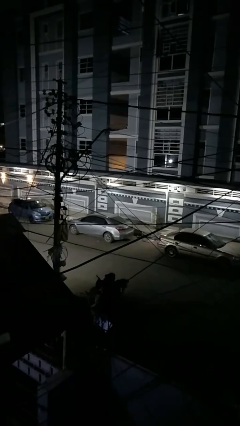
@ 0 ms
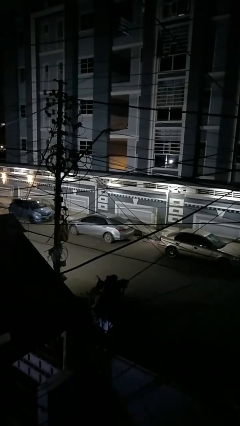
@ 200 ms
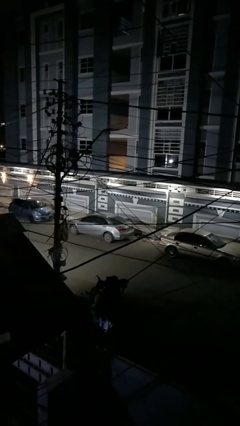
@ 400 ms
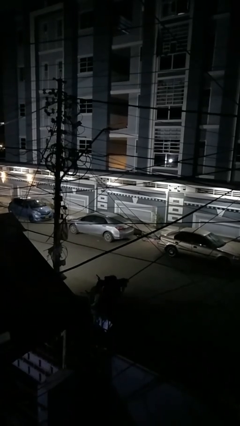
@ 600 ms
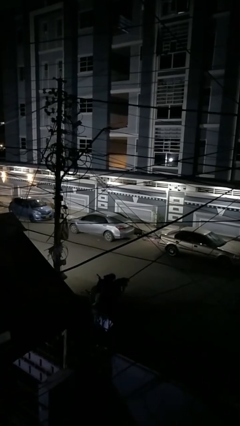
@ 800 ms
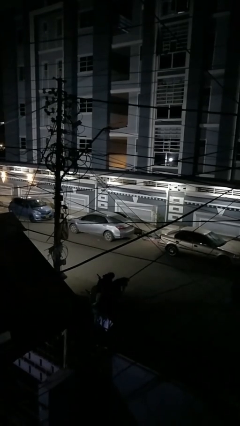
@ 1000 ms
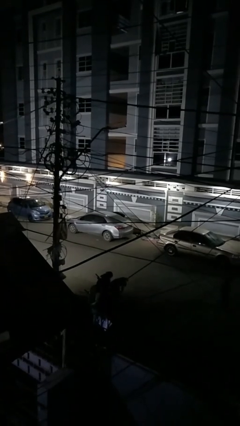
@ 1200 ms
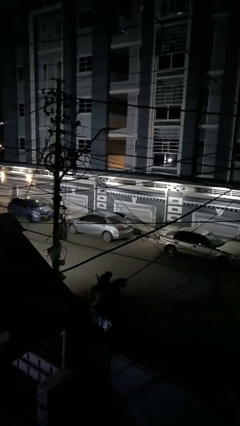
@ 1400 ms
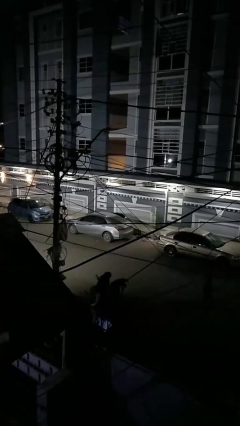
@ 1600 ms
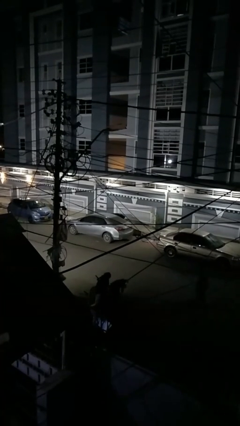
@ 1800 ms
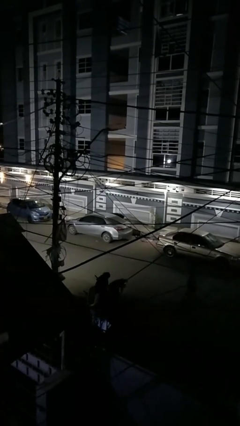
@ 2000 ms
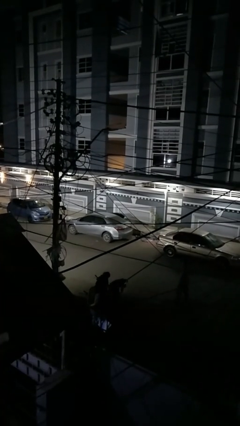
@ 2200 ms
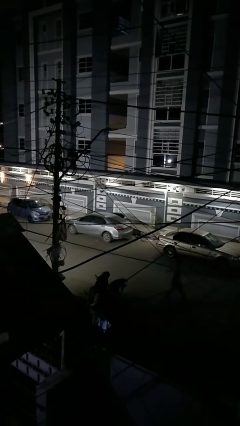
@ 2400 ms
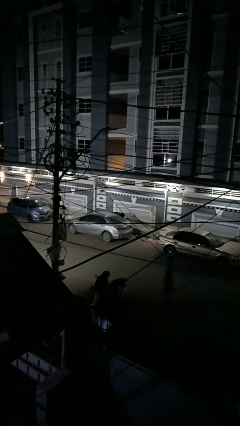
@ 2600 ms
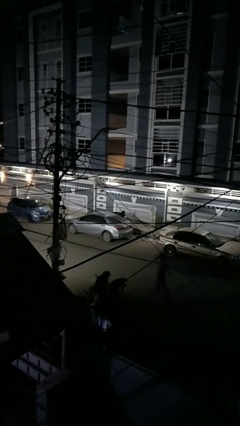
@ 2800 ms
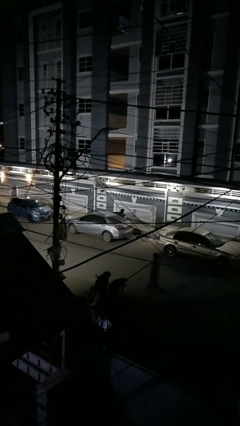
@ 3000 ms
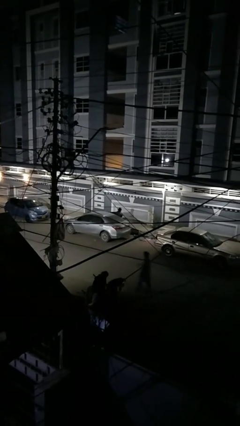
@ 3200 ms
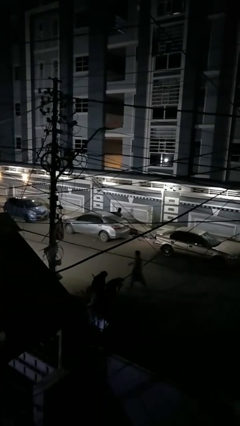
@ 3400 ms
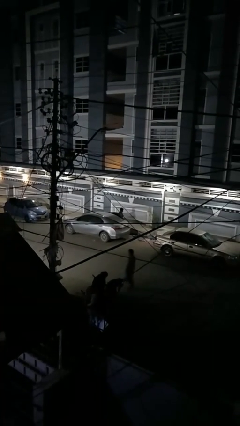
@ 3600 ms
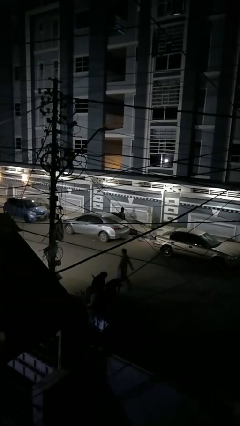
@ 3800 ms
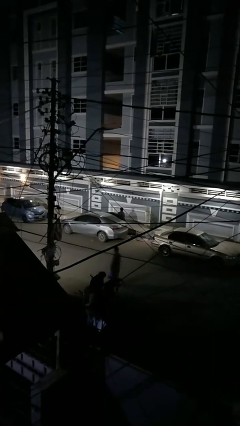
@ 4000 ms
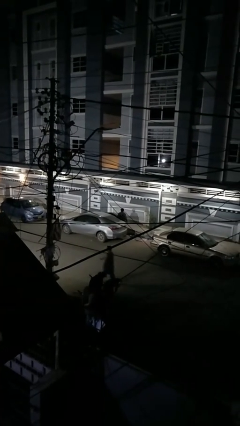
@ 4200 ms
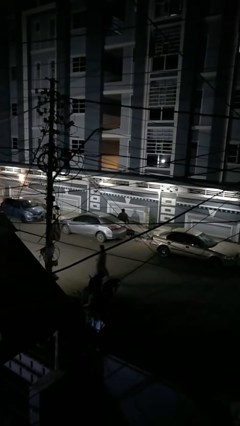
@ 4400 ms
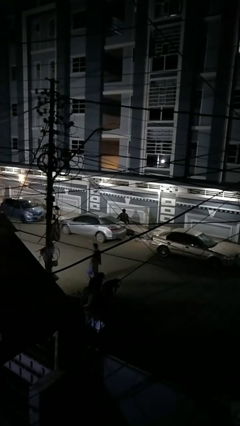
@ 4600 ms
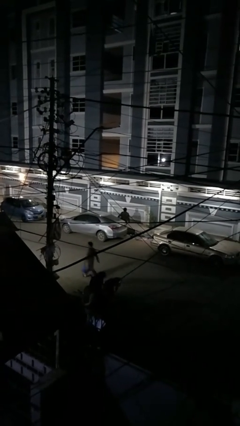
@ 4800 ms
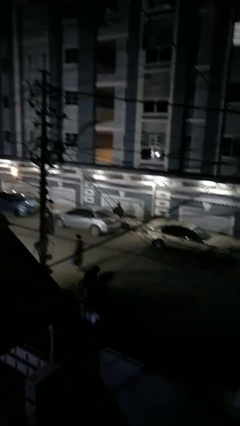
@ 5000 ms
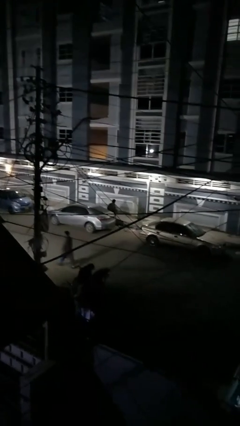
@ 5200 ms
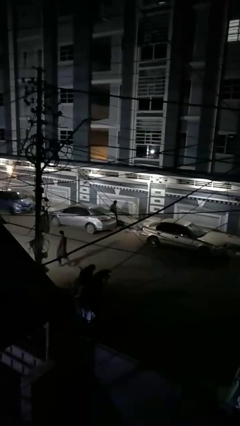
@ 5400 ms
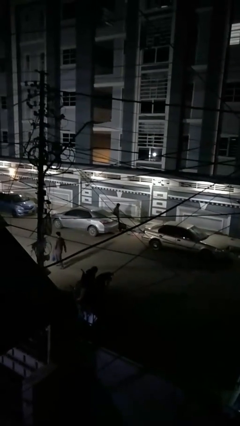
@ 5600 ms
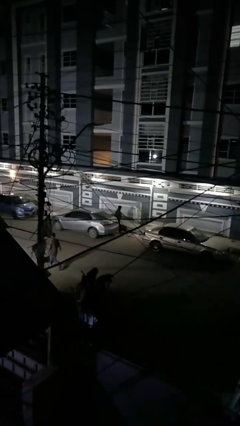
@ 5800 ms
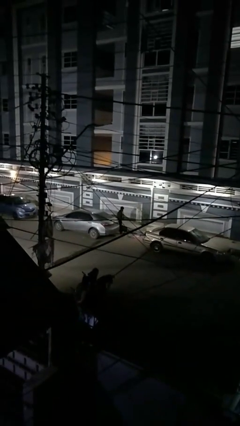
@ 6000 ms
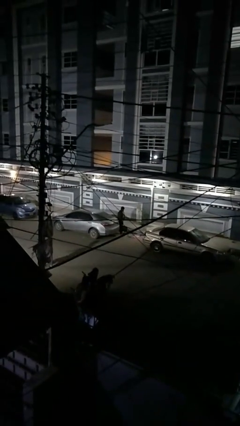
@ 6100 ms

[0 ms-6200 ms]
person exits car

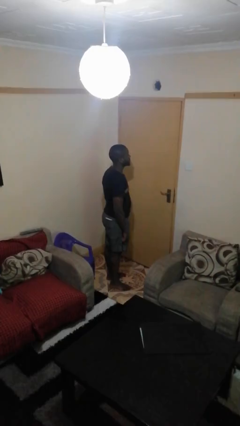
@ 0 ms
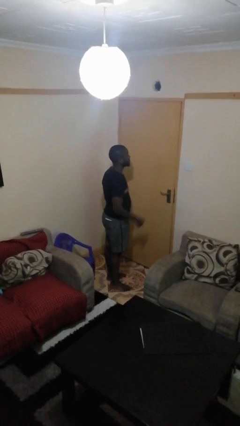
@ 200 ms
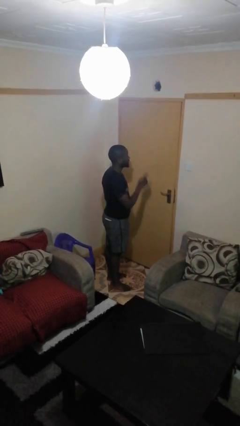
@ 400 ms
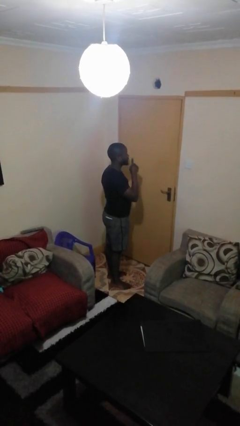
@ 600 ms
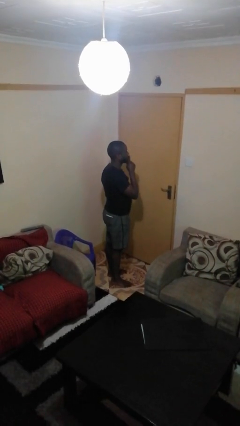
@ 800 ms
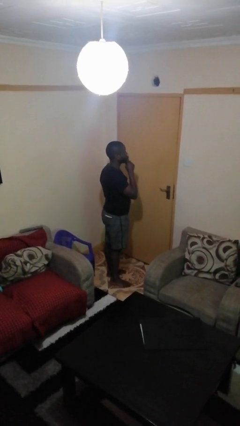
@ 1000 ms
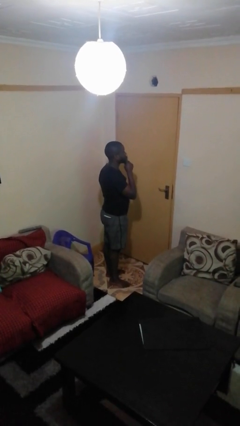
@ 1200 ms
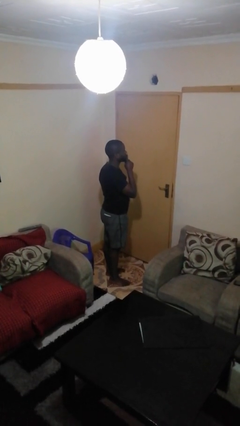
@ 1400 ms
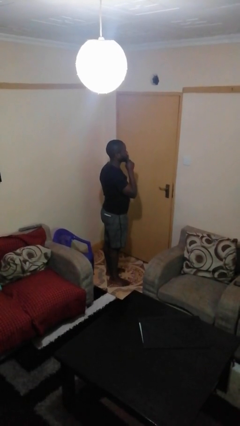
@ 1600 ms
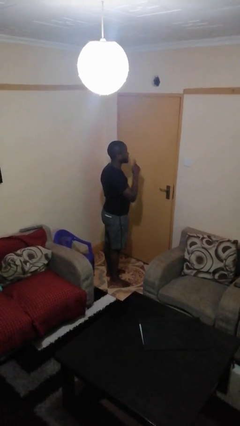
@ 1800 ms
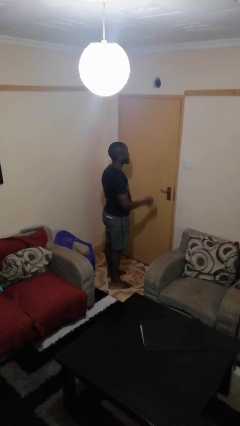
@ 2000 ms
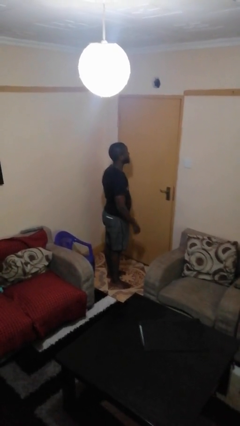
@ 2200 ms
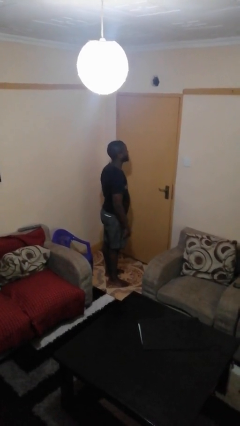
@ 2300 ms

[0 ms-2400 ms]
person gestures be quiet

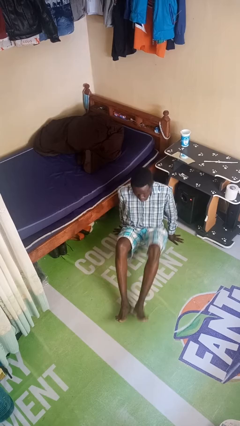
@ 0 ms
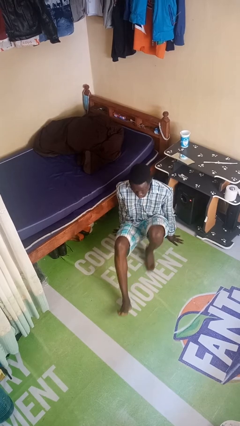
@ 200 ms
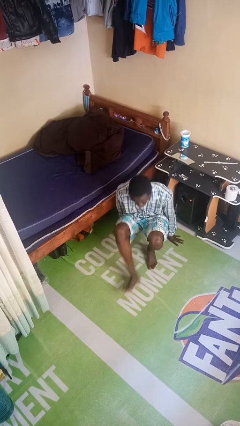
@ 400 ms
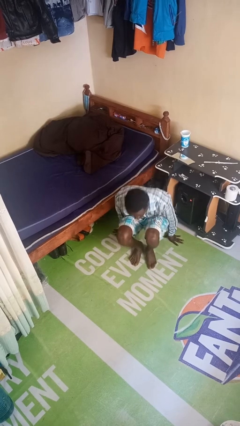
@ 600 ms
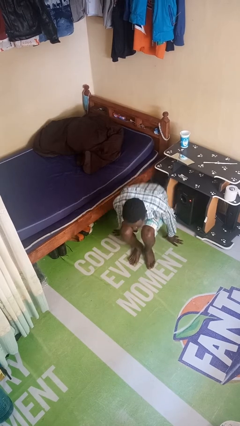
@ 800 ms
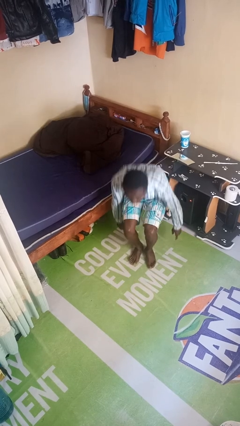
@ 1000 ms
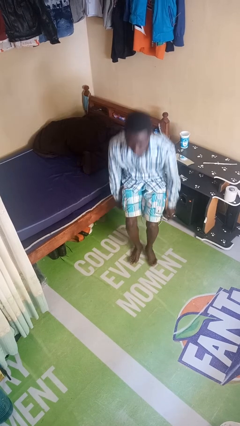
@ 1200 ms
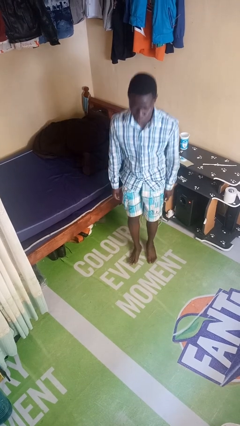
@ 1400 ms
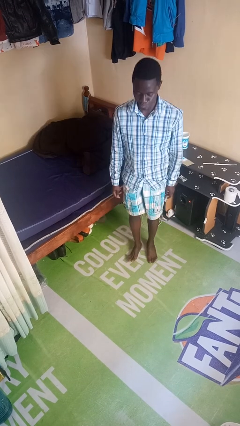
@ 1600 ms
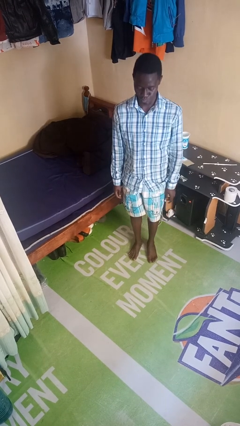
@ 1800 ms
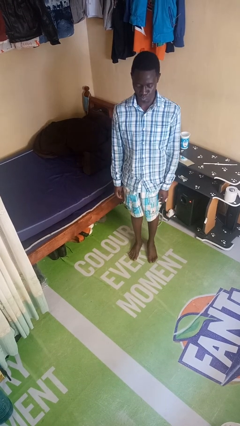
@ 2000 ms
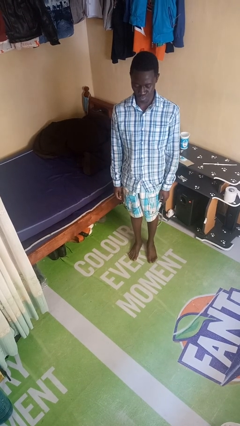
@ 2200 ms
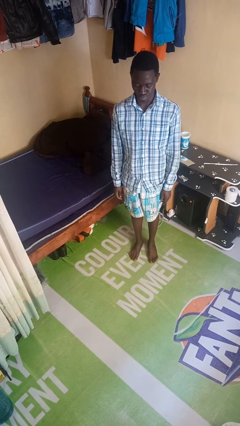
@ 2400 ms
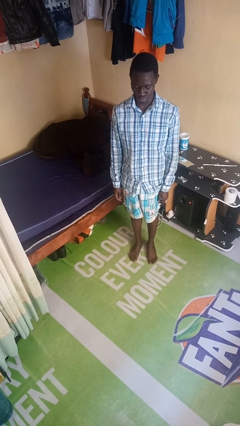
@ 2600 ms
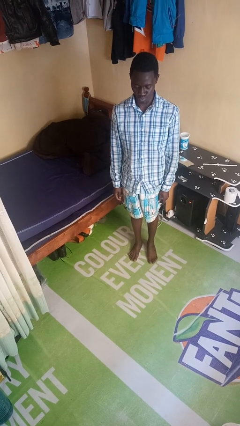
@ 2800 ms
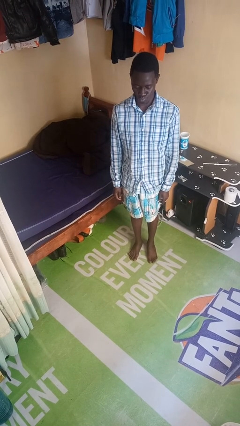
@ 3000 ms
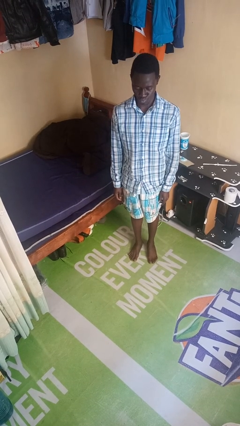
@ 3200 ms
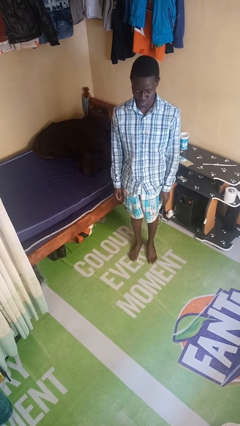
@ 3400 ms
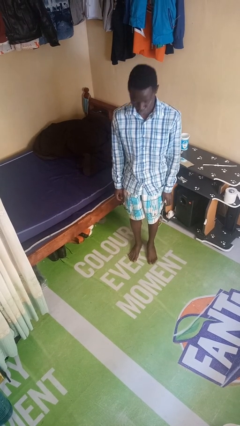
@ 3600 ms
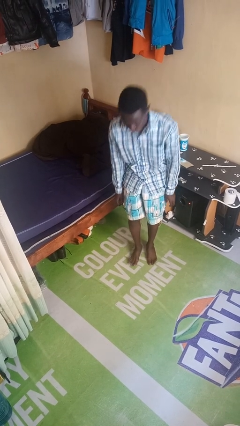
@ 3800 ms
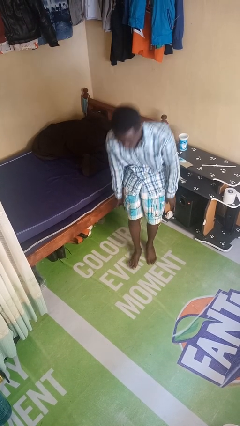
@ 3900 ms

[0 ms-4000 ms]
person stands up from floor

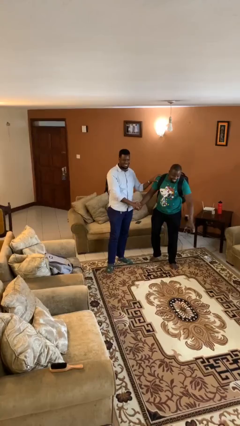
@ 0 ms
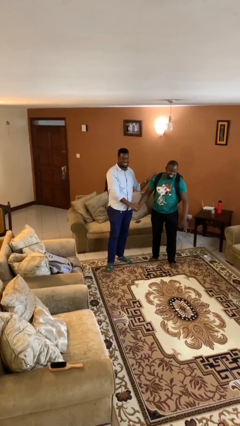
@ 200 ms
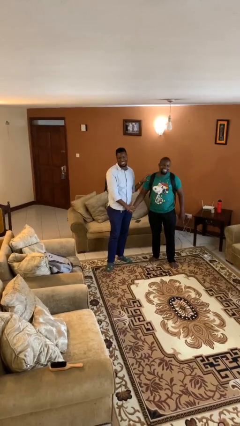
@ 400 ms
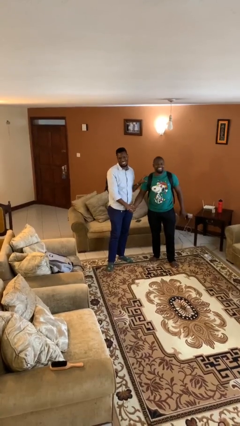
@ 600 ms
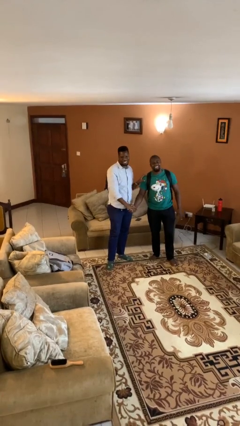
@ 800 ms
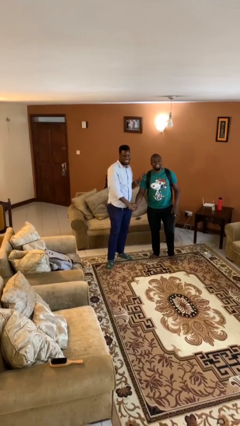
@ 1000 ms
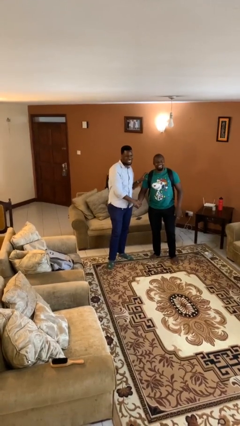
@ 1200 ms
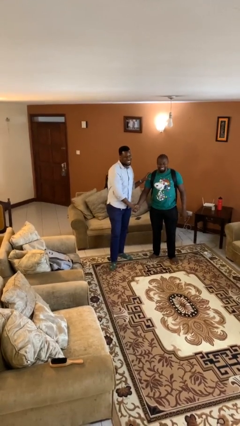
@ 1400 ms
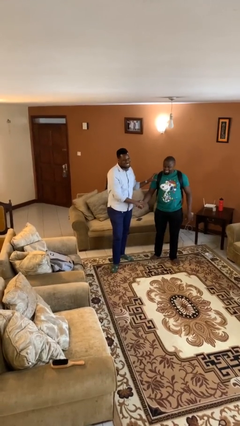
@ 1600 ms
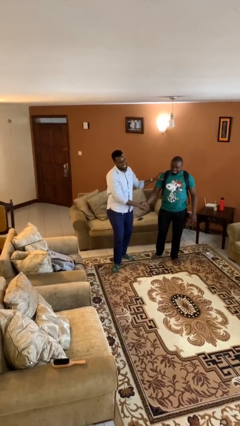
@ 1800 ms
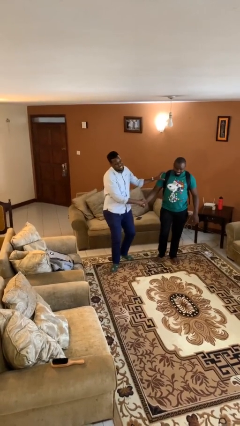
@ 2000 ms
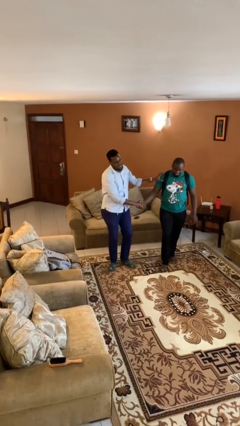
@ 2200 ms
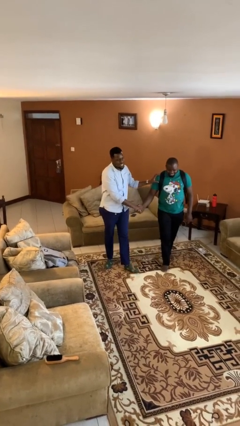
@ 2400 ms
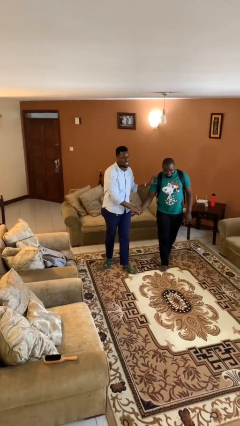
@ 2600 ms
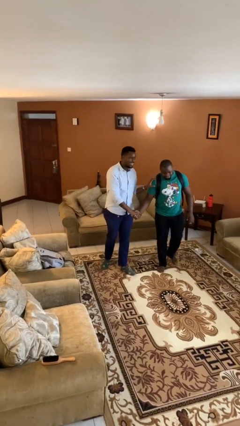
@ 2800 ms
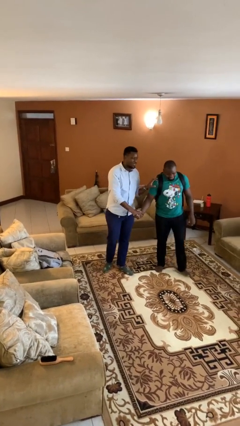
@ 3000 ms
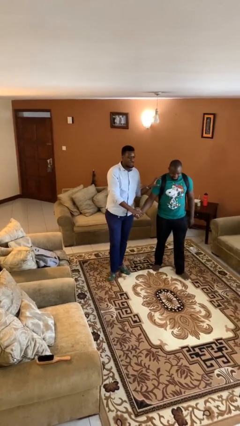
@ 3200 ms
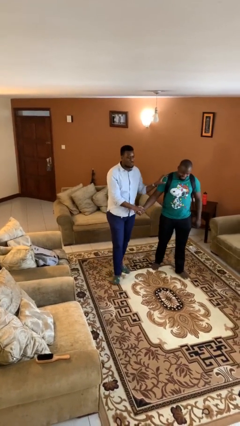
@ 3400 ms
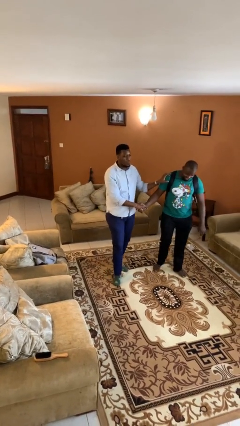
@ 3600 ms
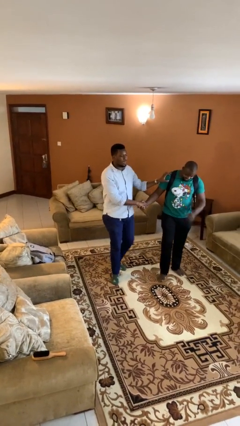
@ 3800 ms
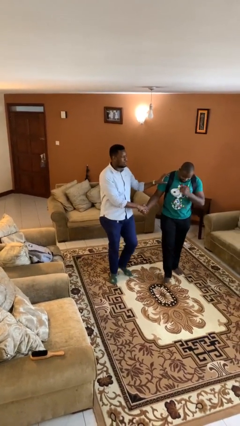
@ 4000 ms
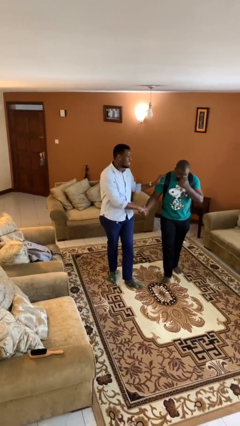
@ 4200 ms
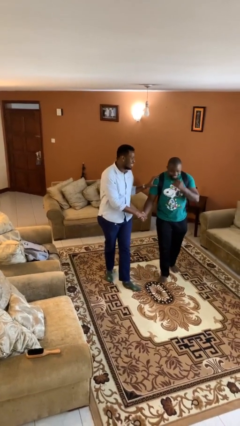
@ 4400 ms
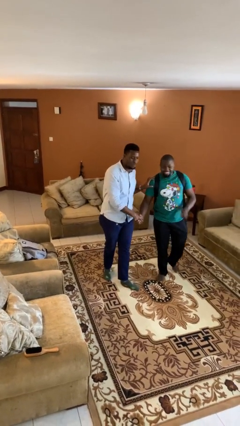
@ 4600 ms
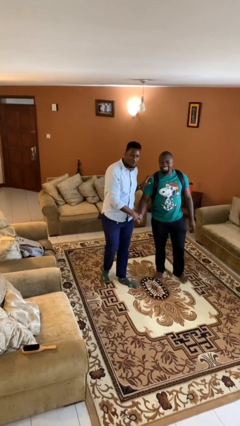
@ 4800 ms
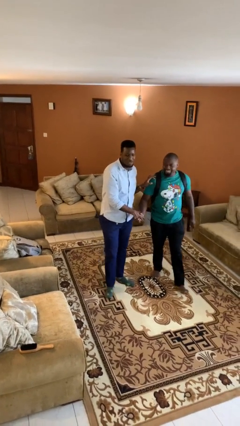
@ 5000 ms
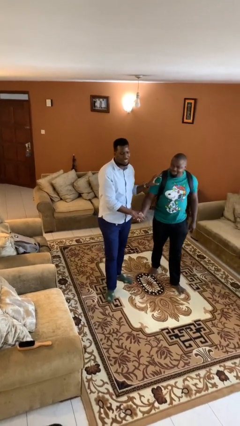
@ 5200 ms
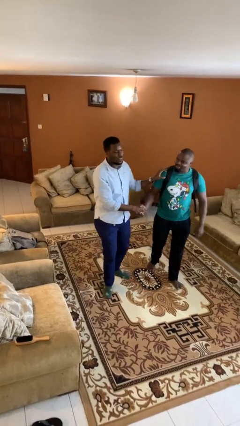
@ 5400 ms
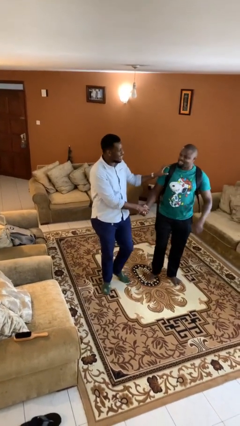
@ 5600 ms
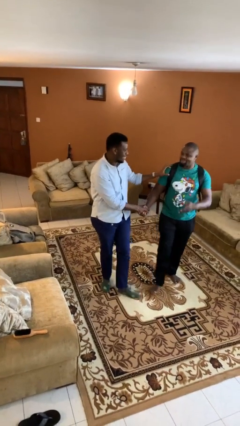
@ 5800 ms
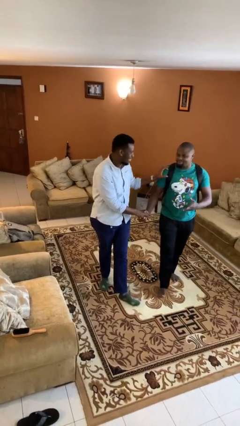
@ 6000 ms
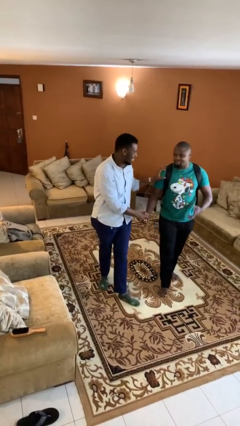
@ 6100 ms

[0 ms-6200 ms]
person holds hand
